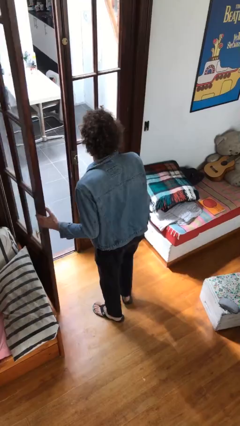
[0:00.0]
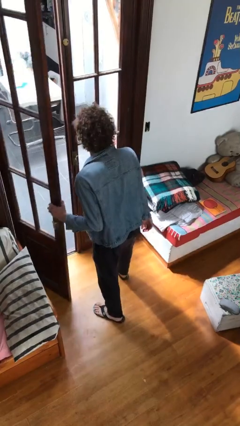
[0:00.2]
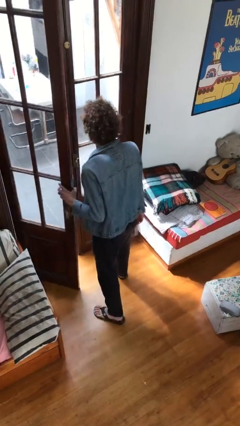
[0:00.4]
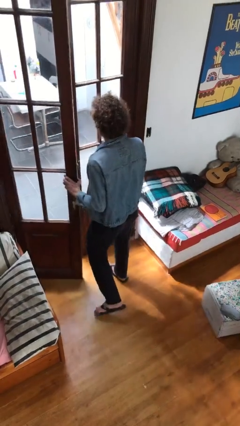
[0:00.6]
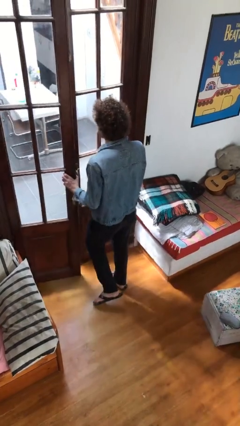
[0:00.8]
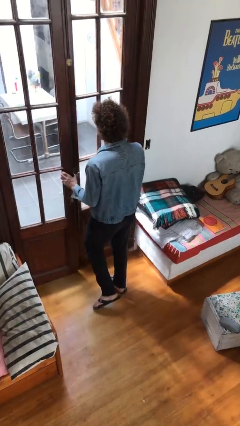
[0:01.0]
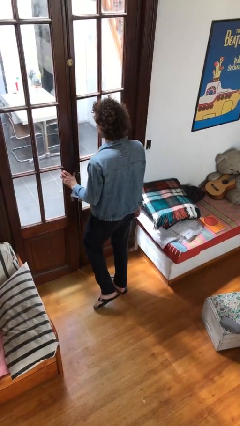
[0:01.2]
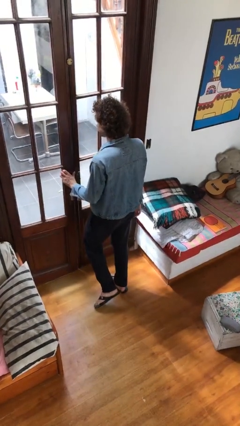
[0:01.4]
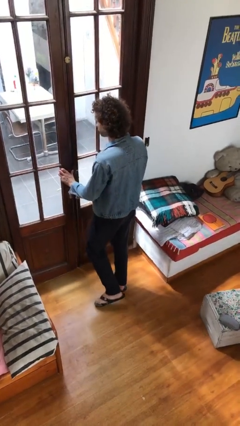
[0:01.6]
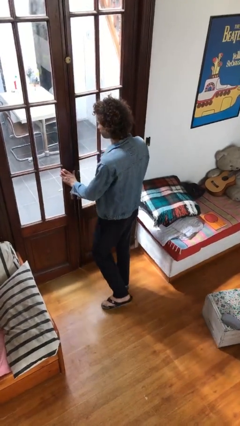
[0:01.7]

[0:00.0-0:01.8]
person closes facility door

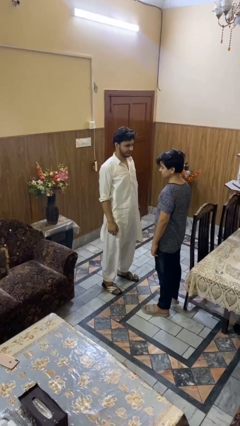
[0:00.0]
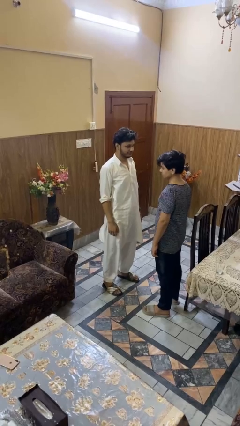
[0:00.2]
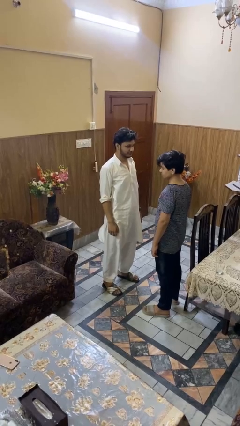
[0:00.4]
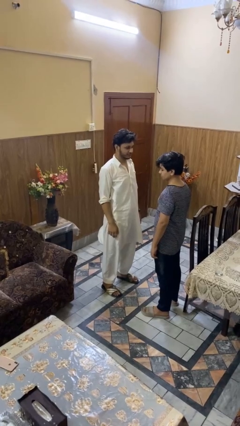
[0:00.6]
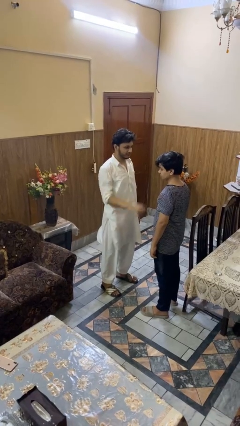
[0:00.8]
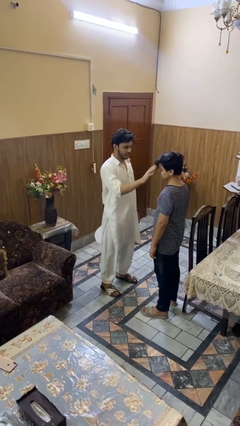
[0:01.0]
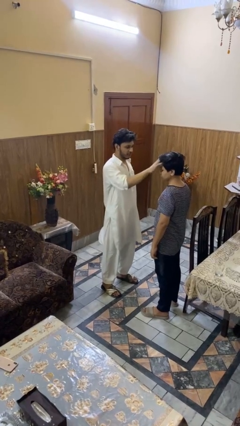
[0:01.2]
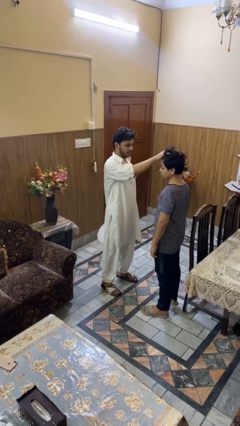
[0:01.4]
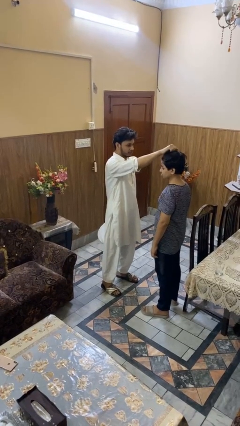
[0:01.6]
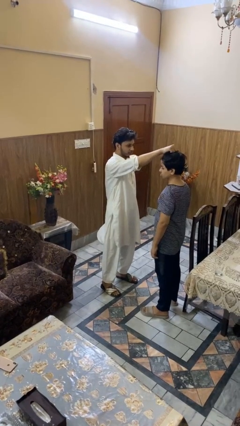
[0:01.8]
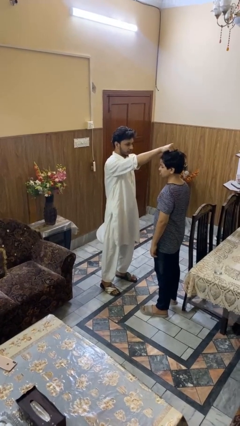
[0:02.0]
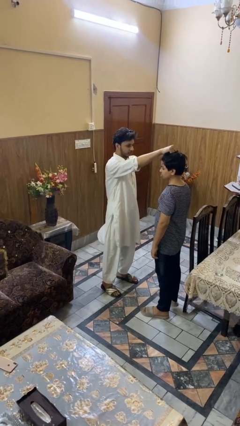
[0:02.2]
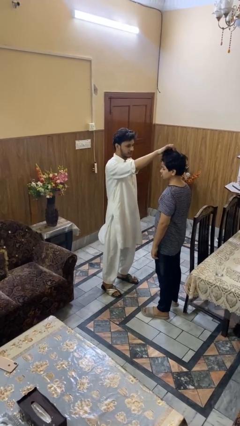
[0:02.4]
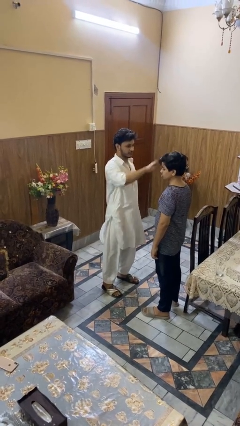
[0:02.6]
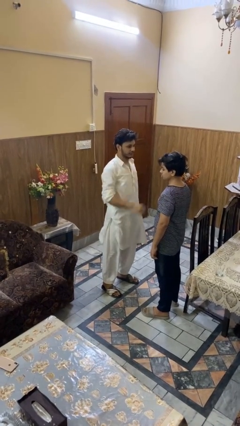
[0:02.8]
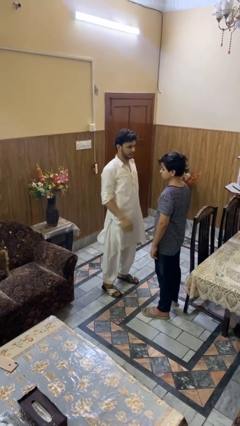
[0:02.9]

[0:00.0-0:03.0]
person grabs person by hair

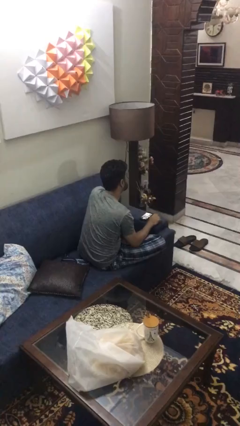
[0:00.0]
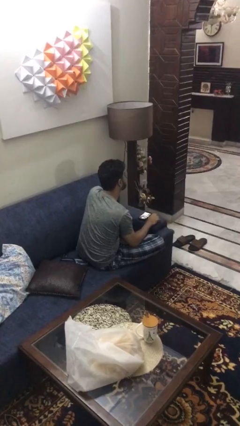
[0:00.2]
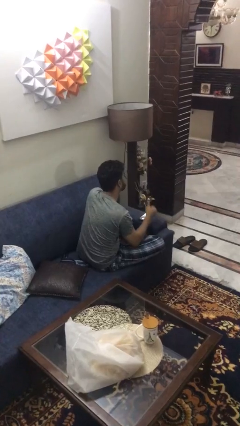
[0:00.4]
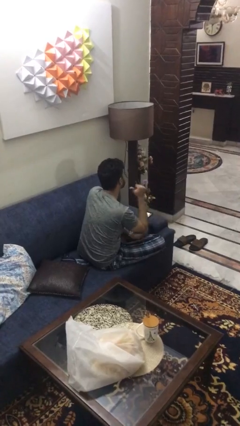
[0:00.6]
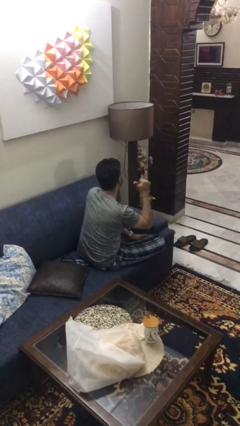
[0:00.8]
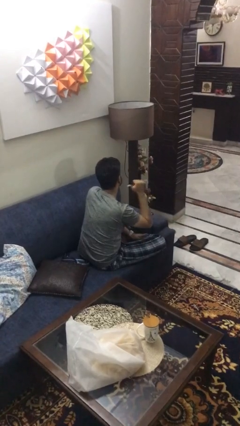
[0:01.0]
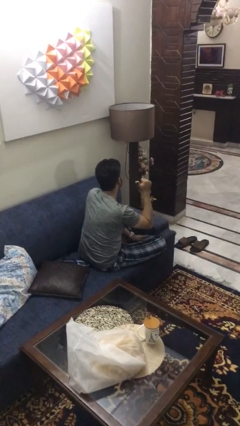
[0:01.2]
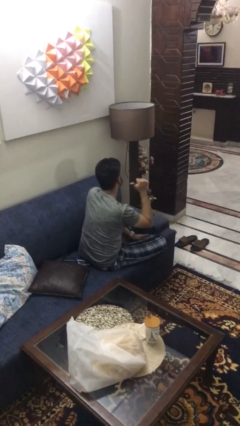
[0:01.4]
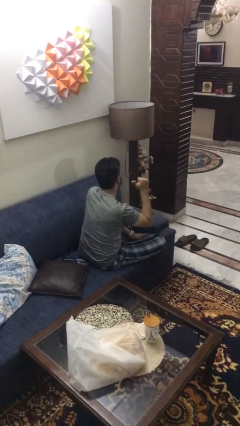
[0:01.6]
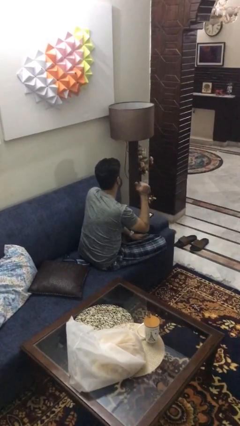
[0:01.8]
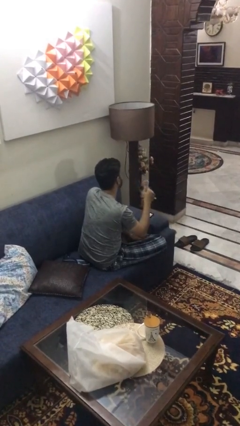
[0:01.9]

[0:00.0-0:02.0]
person gestures behind me

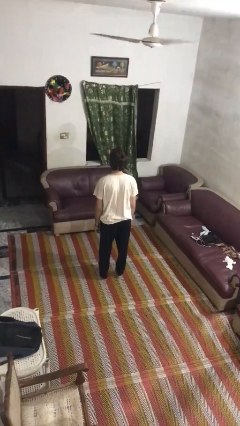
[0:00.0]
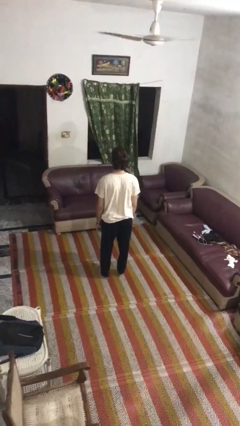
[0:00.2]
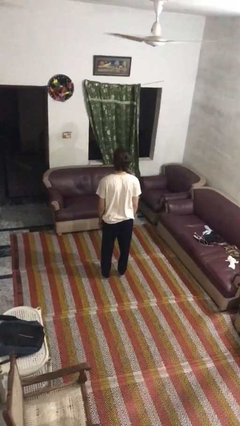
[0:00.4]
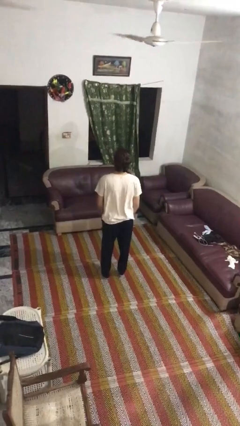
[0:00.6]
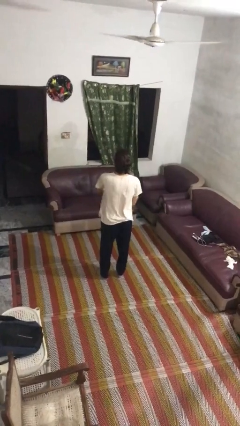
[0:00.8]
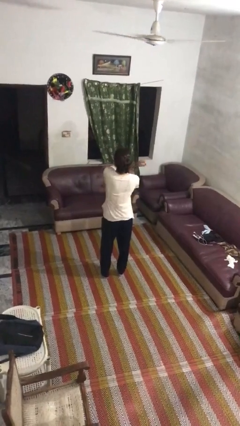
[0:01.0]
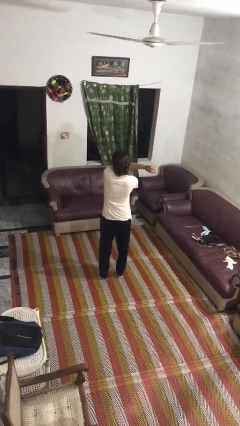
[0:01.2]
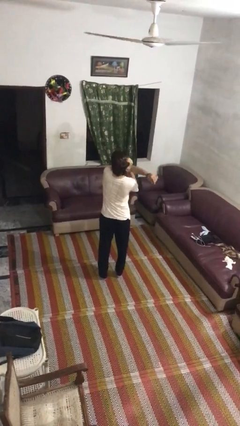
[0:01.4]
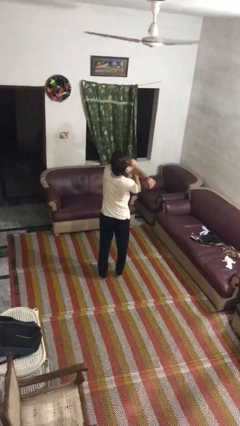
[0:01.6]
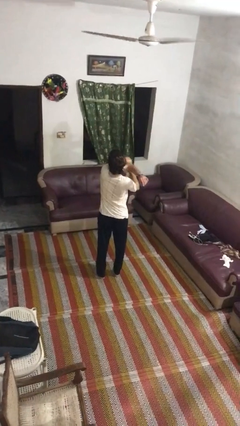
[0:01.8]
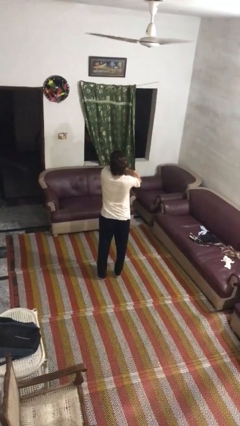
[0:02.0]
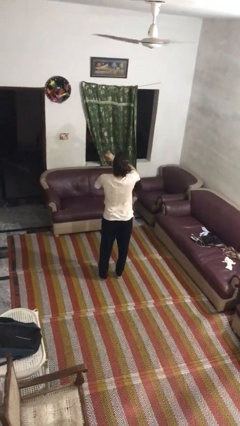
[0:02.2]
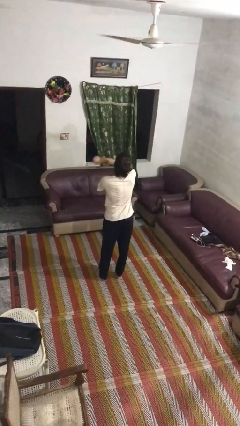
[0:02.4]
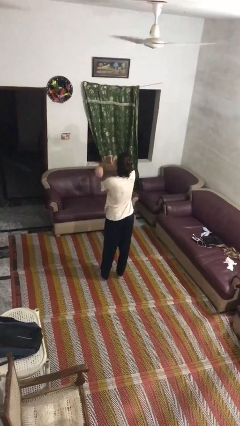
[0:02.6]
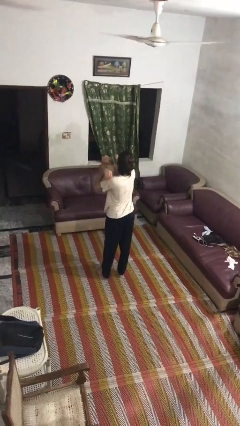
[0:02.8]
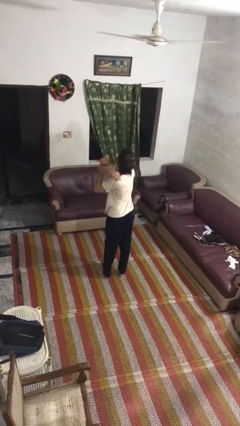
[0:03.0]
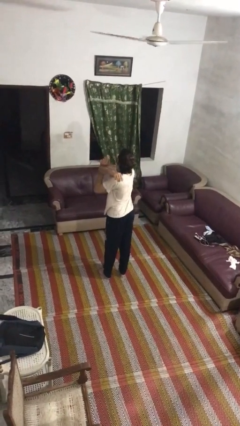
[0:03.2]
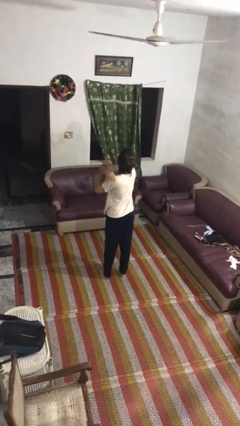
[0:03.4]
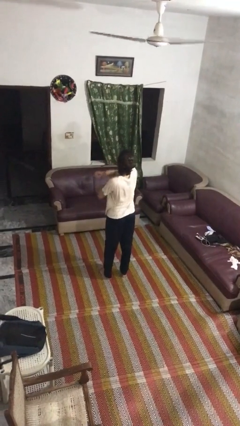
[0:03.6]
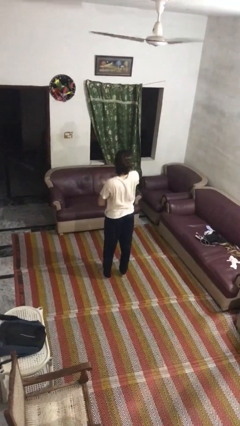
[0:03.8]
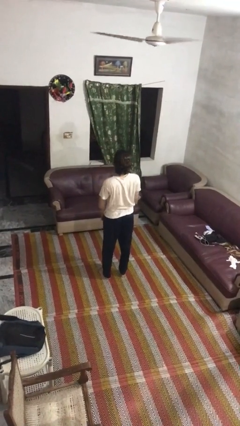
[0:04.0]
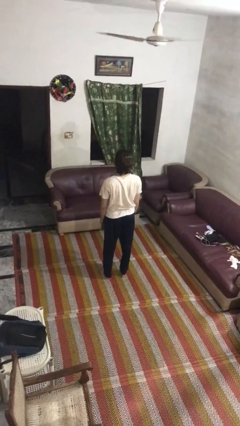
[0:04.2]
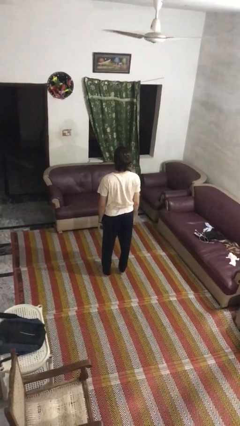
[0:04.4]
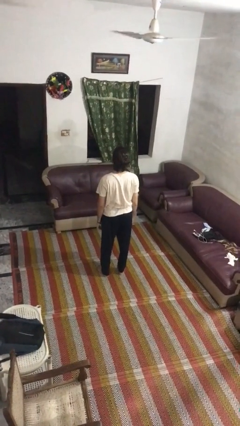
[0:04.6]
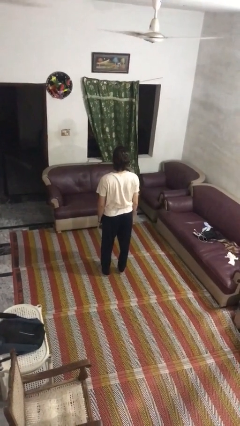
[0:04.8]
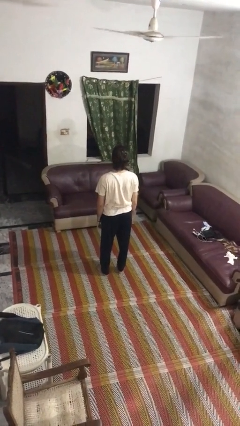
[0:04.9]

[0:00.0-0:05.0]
person stretches arms to side

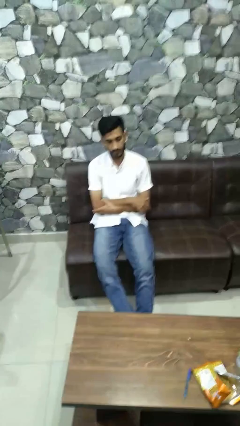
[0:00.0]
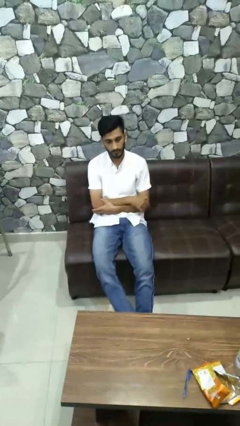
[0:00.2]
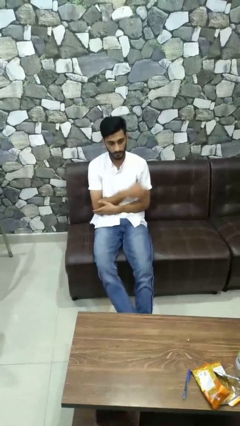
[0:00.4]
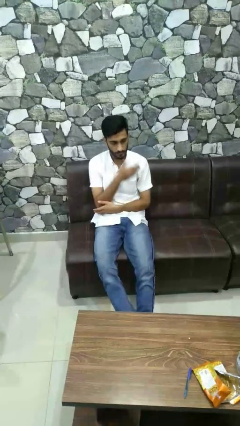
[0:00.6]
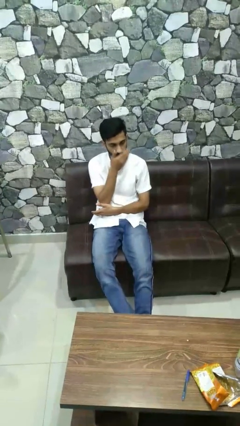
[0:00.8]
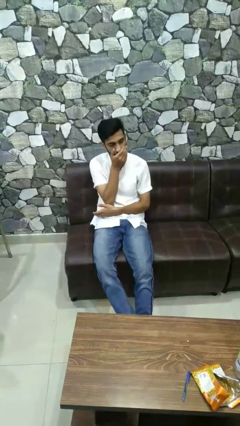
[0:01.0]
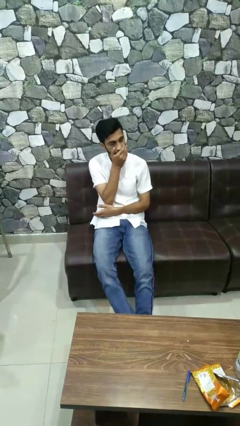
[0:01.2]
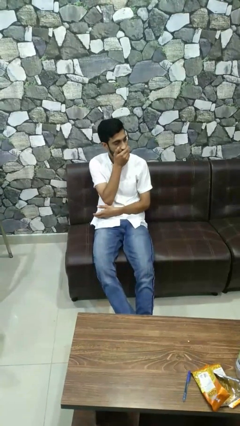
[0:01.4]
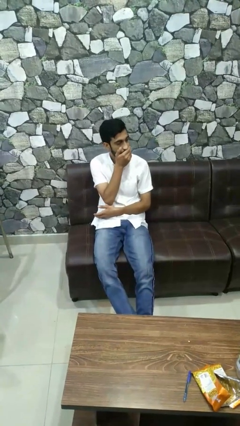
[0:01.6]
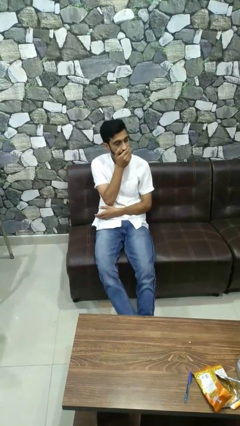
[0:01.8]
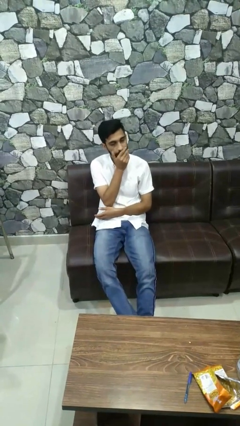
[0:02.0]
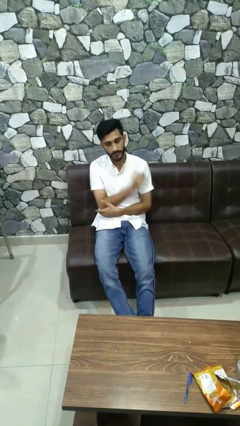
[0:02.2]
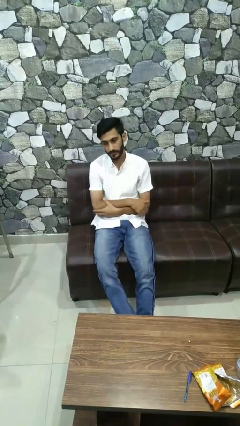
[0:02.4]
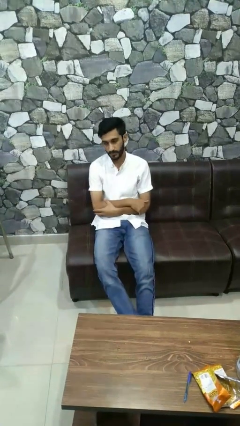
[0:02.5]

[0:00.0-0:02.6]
person covers face with hands

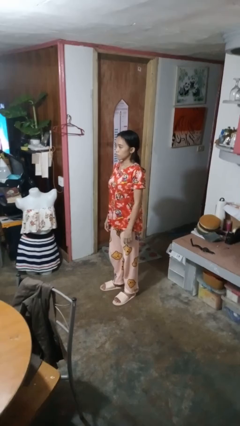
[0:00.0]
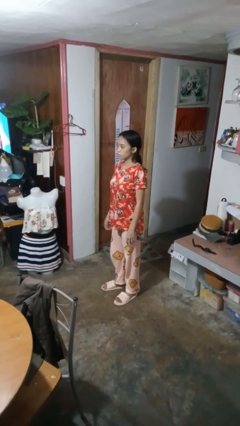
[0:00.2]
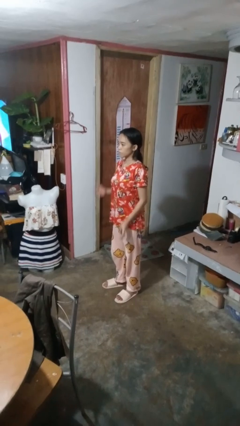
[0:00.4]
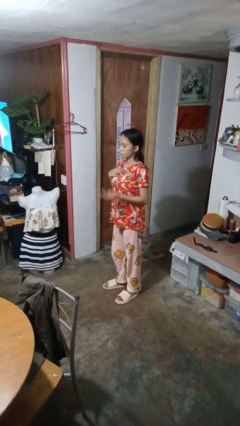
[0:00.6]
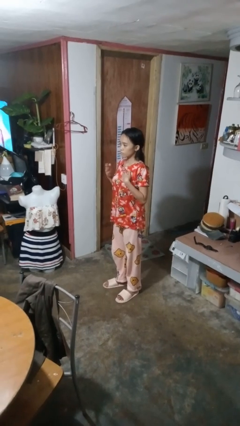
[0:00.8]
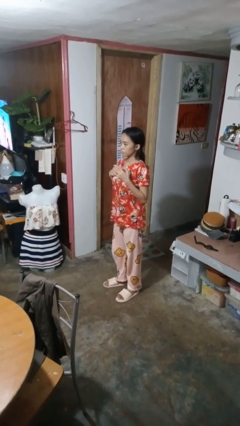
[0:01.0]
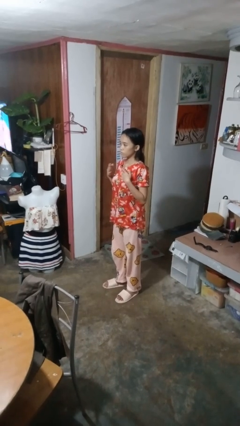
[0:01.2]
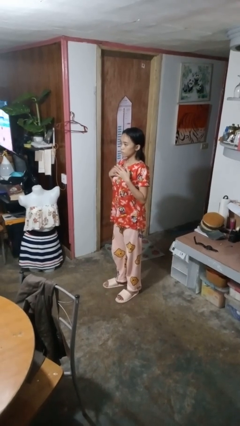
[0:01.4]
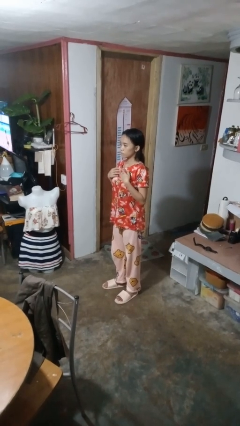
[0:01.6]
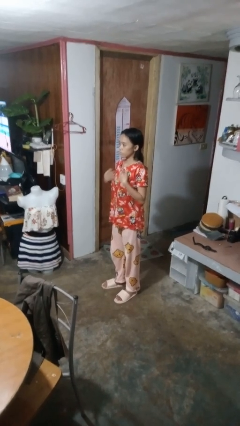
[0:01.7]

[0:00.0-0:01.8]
person drums on chest

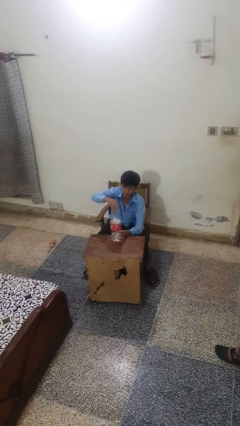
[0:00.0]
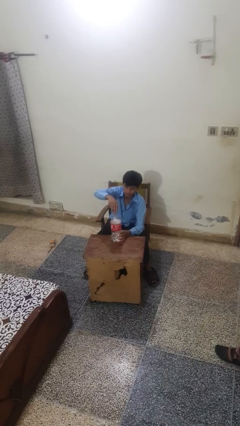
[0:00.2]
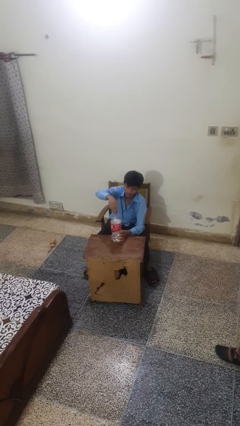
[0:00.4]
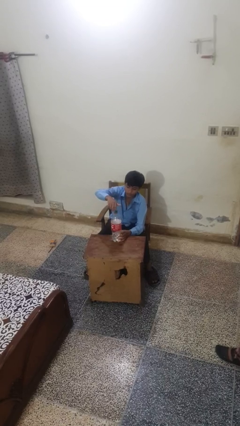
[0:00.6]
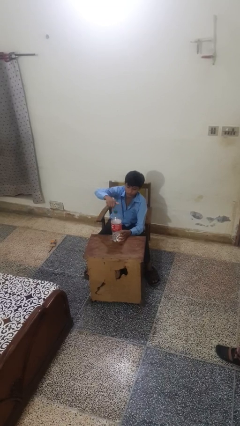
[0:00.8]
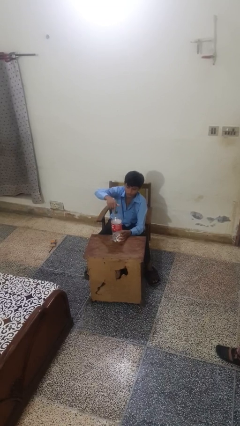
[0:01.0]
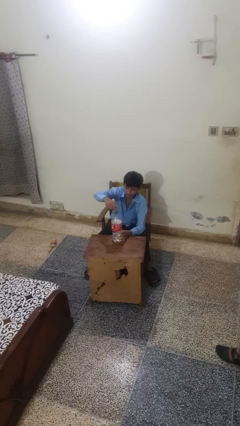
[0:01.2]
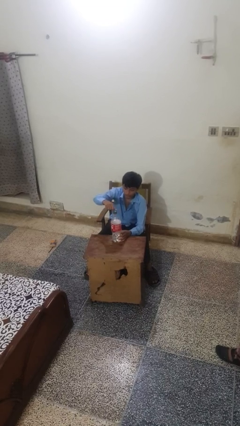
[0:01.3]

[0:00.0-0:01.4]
person screws lid to bottle
